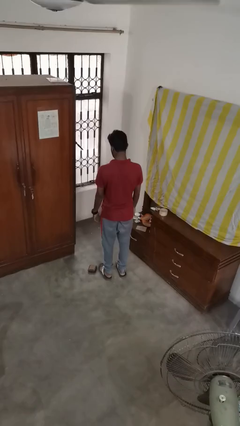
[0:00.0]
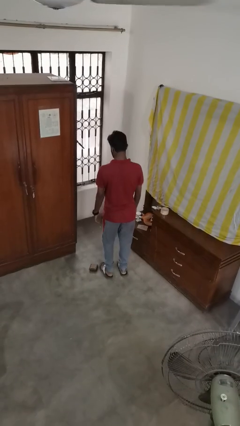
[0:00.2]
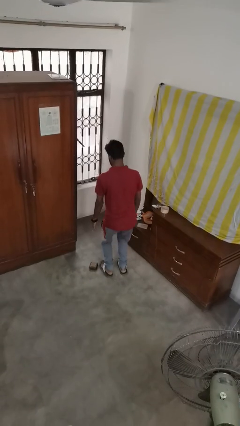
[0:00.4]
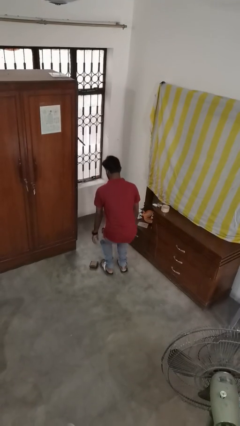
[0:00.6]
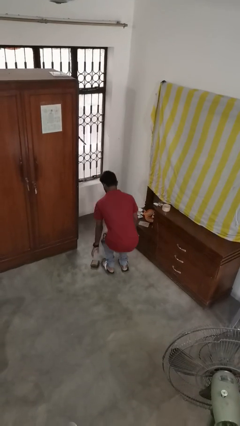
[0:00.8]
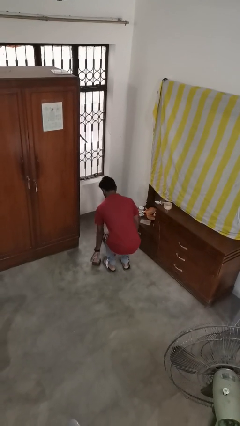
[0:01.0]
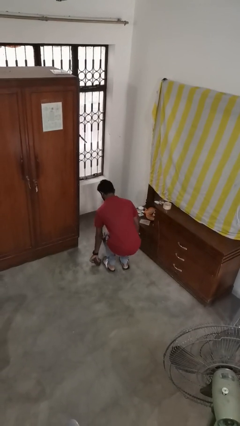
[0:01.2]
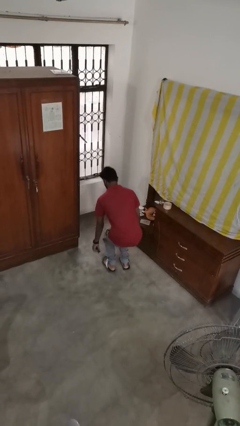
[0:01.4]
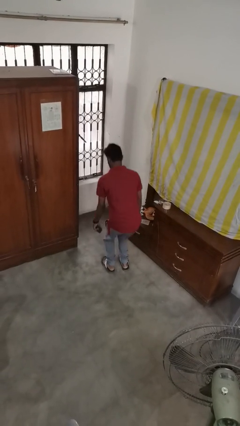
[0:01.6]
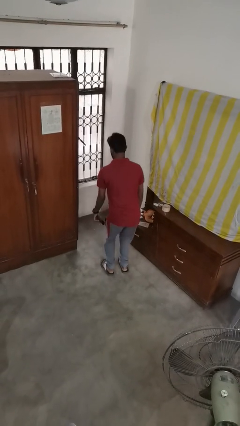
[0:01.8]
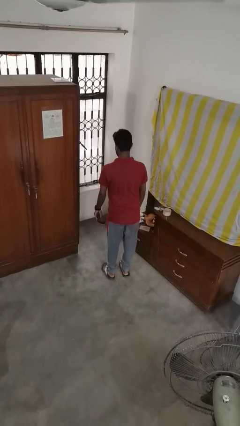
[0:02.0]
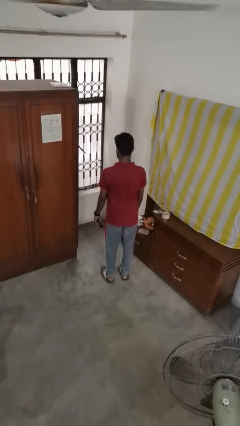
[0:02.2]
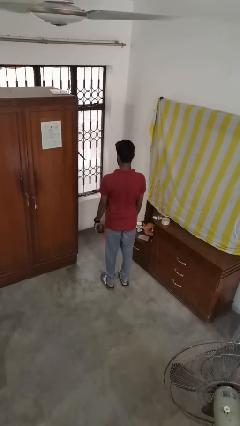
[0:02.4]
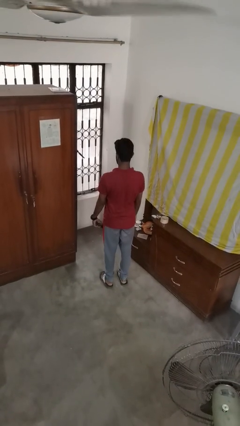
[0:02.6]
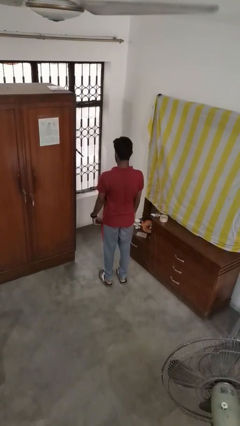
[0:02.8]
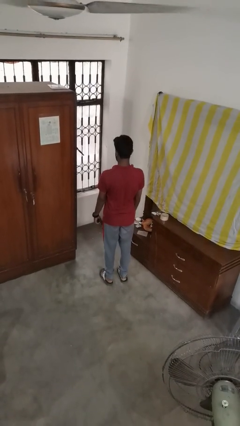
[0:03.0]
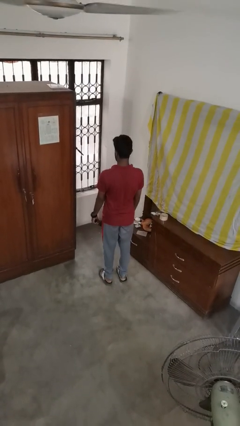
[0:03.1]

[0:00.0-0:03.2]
person picks up object from floor

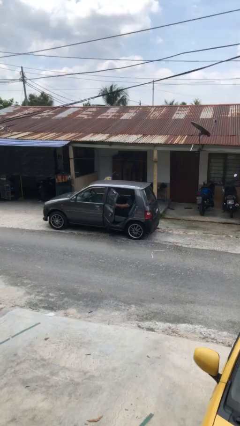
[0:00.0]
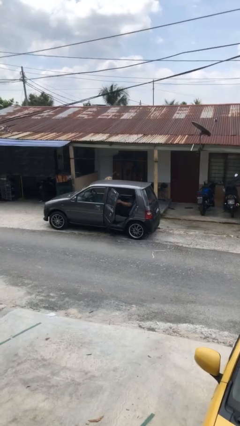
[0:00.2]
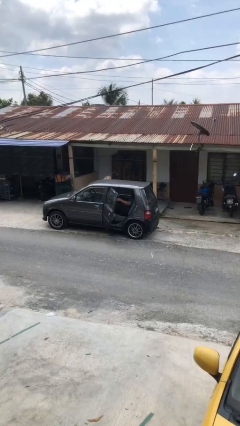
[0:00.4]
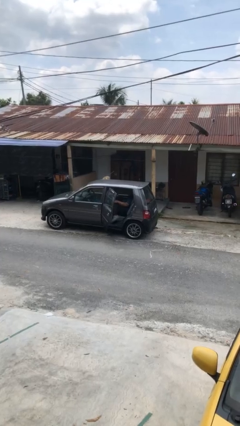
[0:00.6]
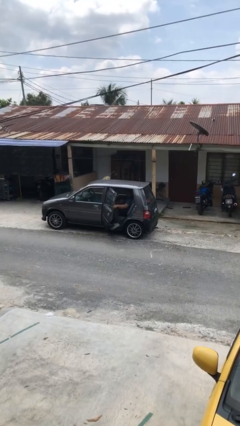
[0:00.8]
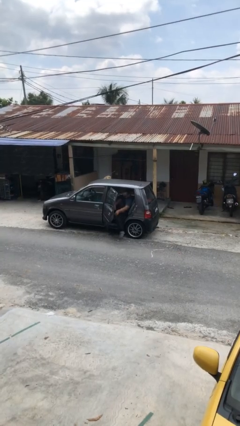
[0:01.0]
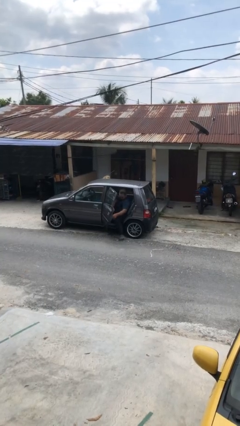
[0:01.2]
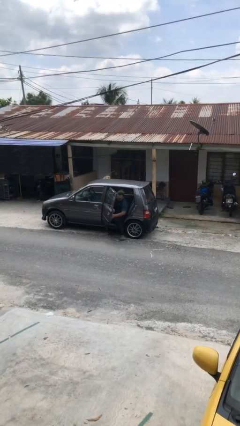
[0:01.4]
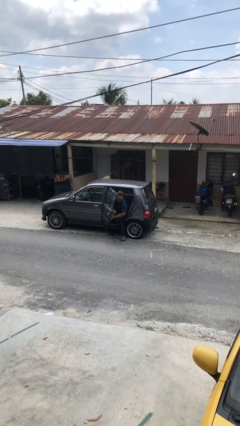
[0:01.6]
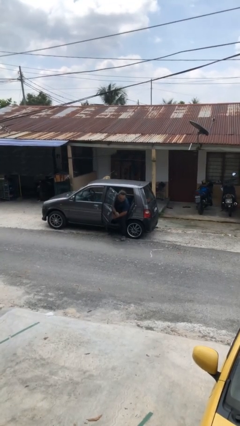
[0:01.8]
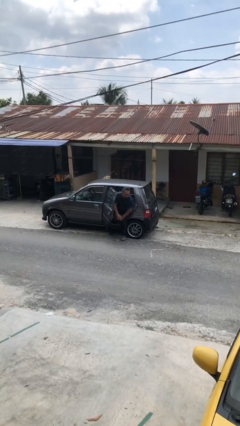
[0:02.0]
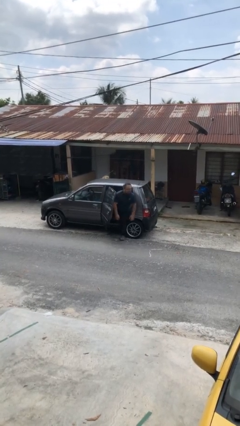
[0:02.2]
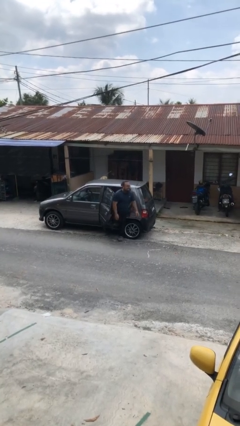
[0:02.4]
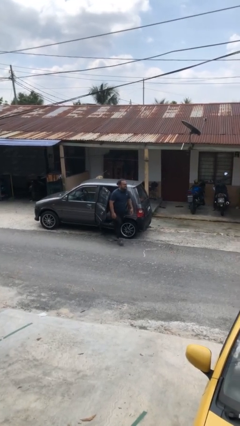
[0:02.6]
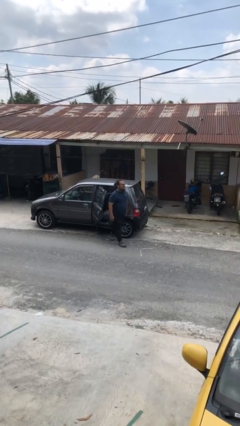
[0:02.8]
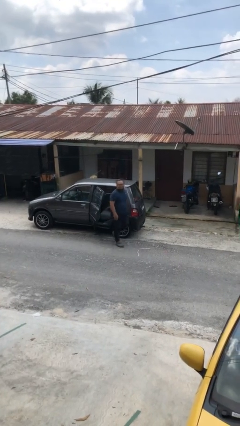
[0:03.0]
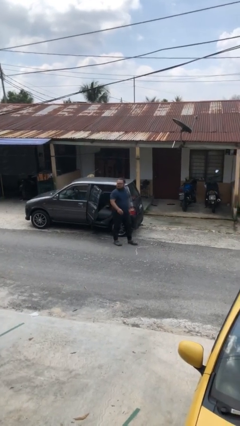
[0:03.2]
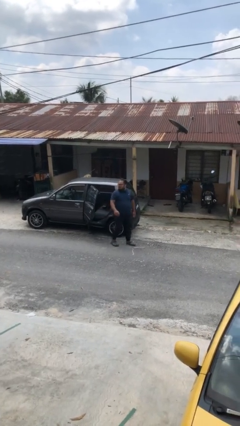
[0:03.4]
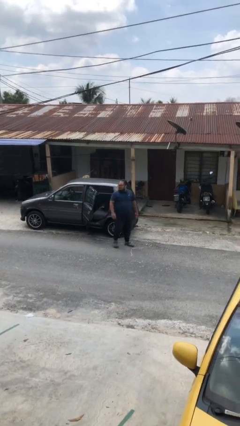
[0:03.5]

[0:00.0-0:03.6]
person exits car

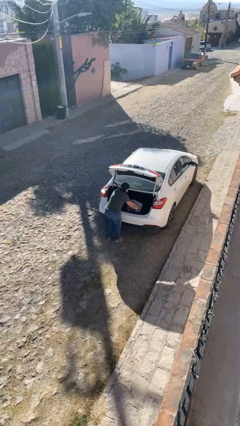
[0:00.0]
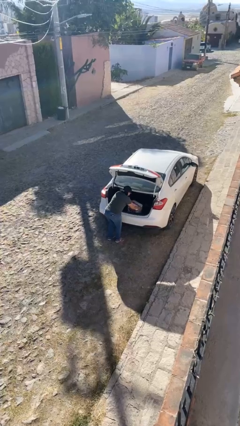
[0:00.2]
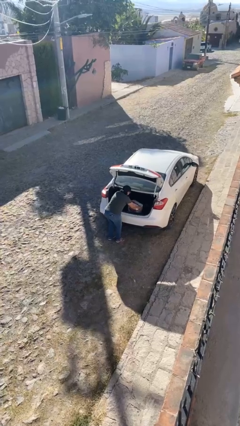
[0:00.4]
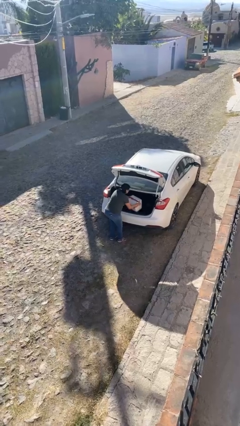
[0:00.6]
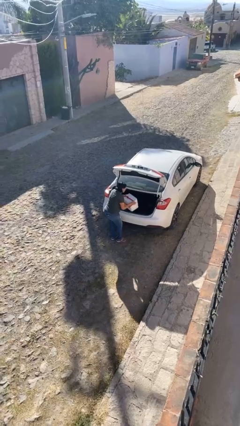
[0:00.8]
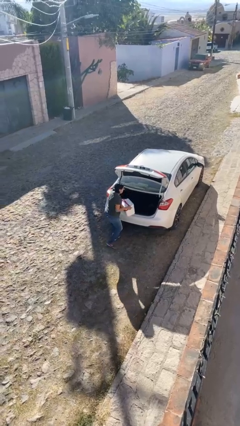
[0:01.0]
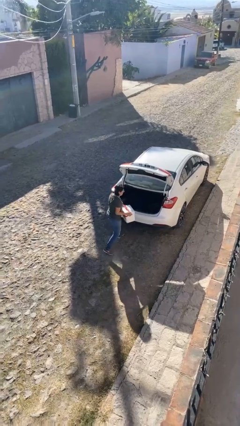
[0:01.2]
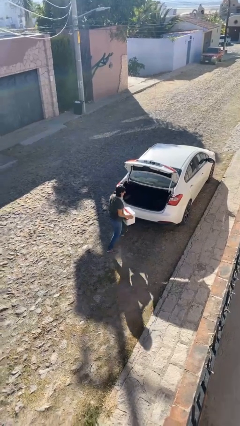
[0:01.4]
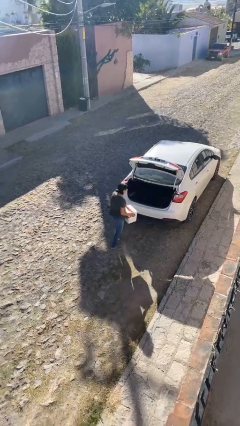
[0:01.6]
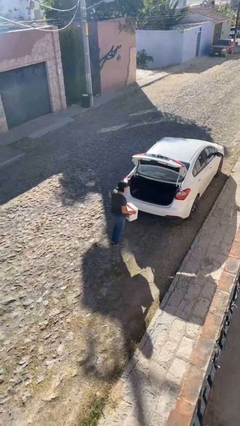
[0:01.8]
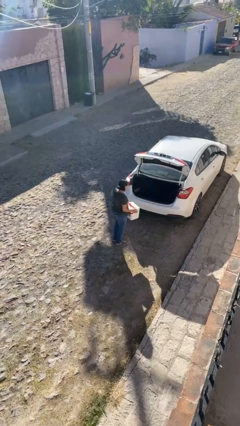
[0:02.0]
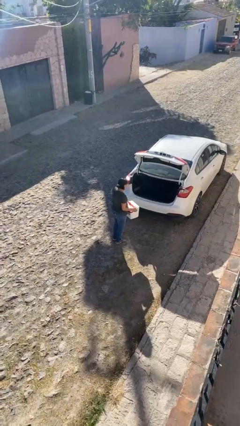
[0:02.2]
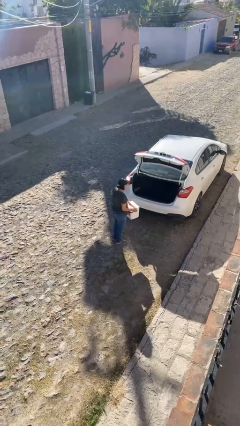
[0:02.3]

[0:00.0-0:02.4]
person unloads car

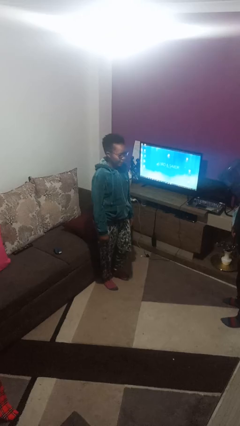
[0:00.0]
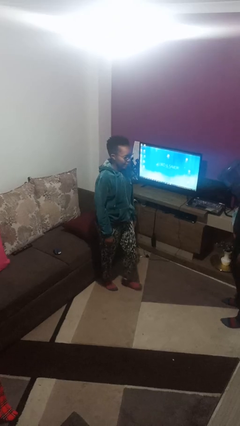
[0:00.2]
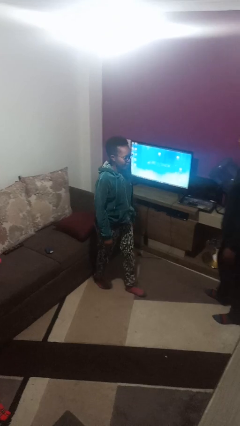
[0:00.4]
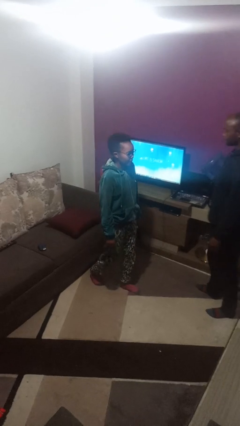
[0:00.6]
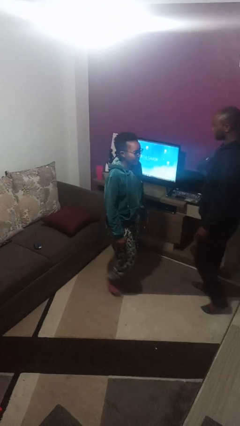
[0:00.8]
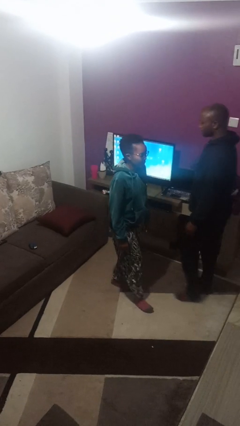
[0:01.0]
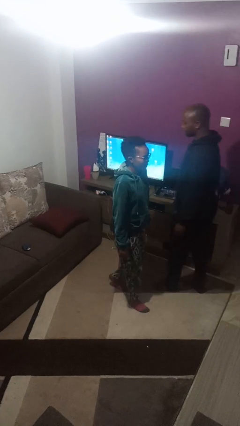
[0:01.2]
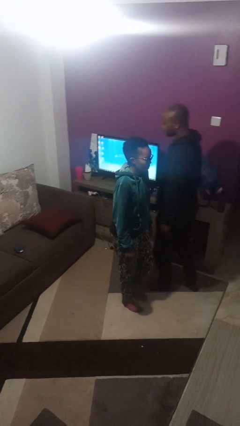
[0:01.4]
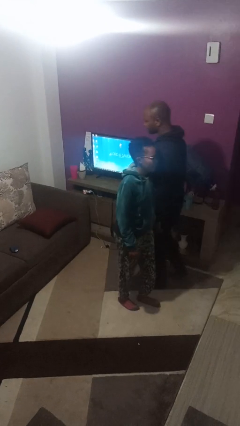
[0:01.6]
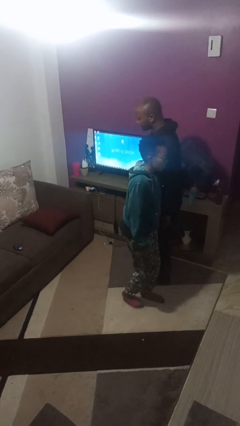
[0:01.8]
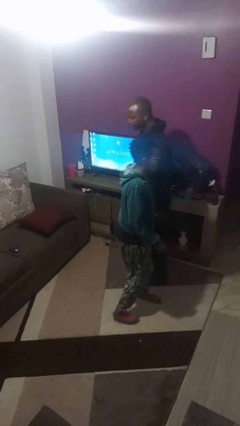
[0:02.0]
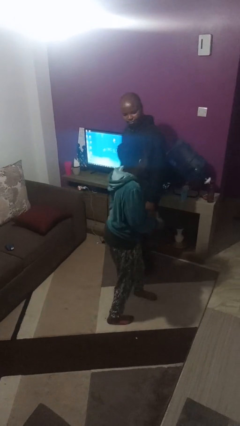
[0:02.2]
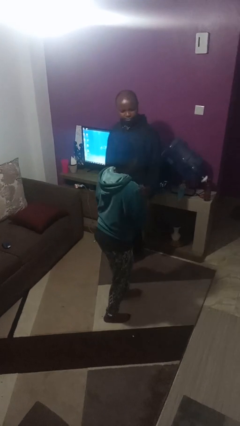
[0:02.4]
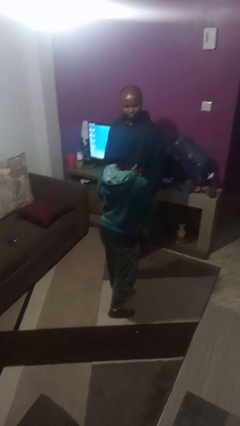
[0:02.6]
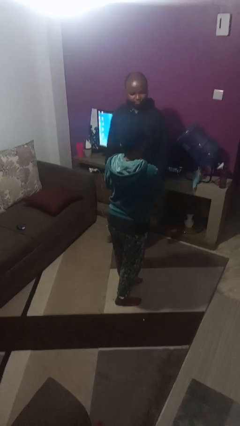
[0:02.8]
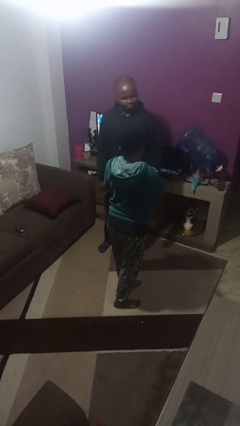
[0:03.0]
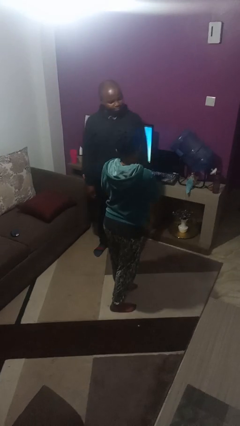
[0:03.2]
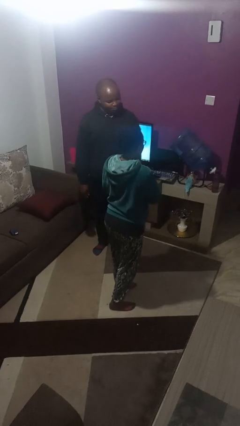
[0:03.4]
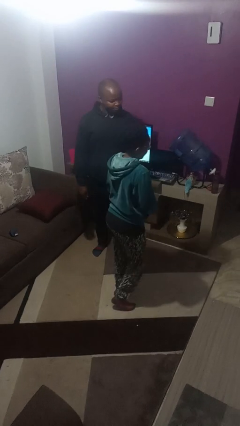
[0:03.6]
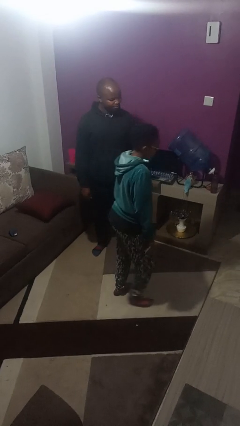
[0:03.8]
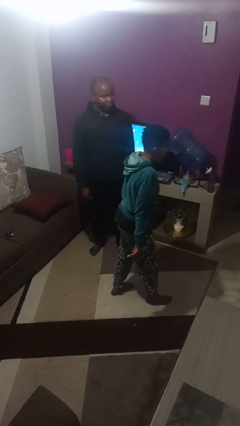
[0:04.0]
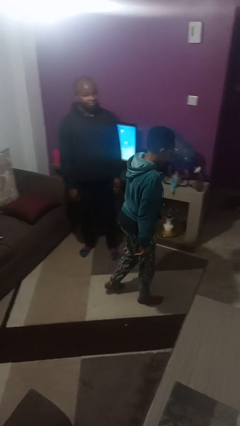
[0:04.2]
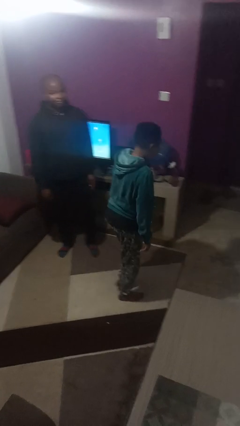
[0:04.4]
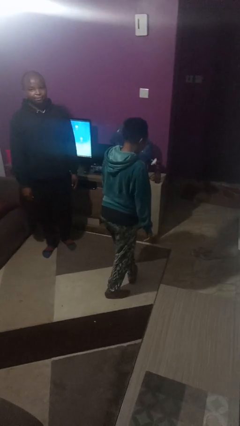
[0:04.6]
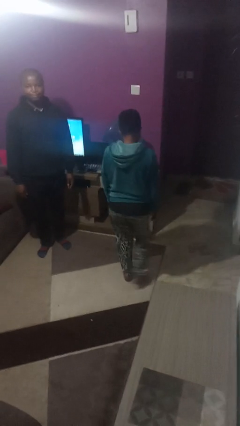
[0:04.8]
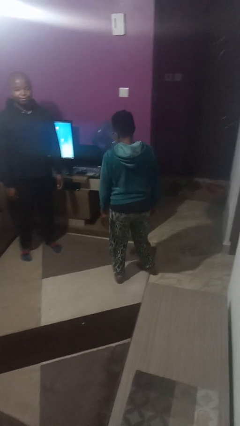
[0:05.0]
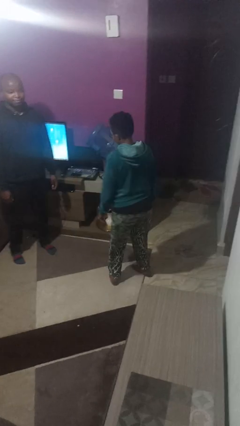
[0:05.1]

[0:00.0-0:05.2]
person bumps into person

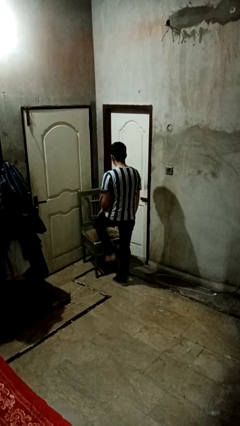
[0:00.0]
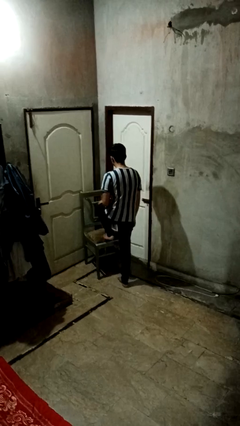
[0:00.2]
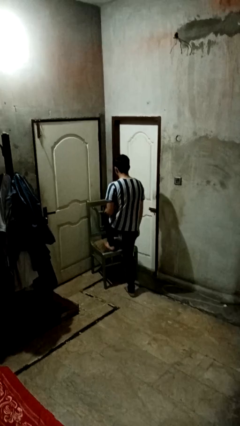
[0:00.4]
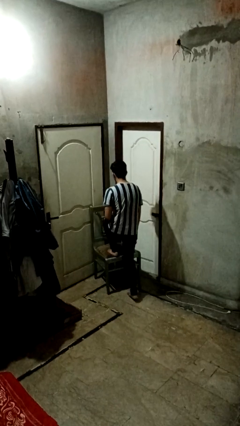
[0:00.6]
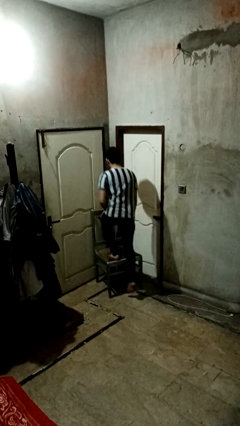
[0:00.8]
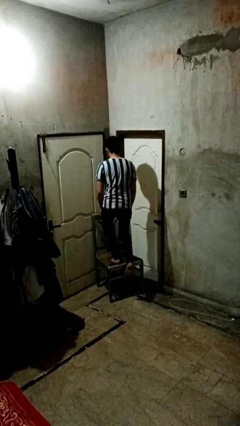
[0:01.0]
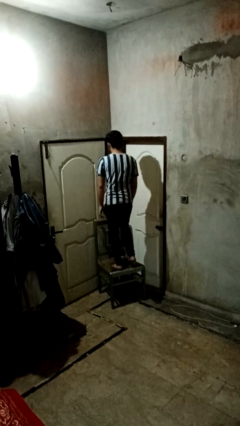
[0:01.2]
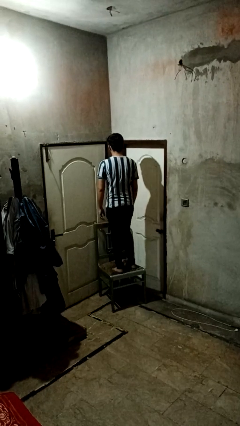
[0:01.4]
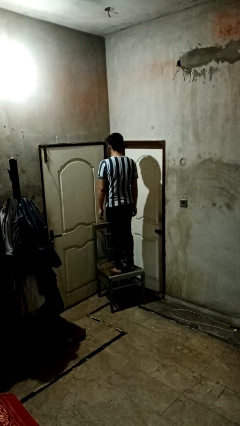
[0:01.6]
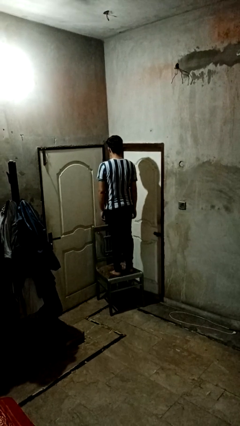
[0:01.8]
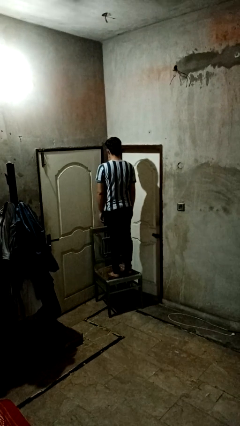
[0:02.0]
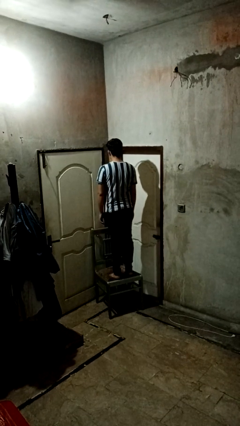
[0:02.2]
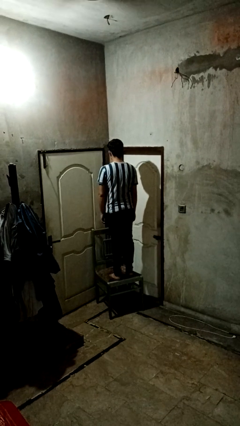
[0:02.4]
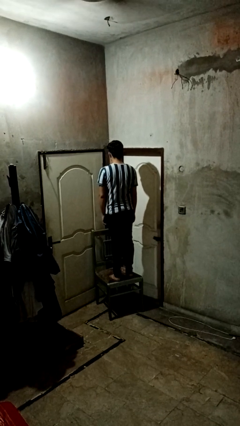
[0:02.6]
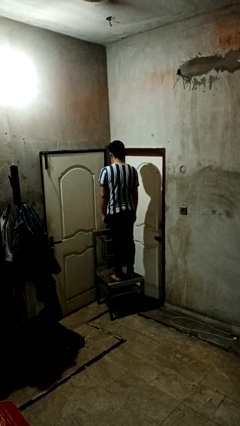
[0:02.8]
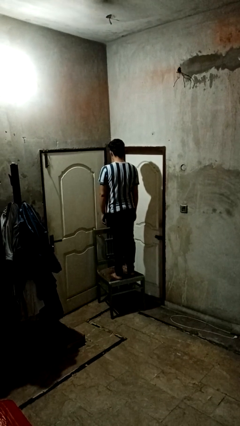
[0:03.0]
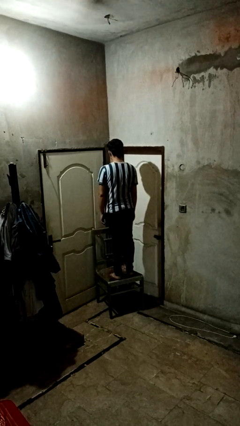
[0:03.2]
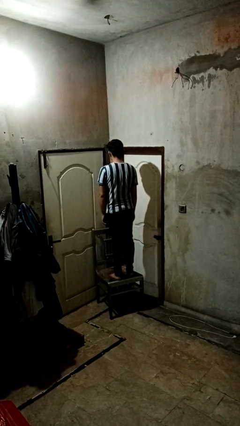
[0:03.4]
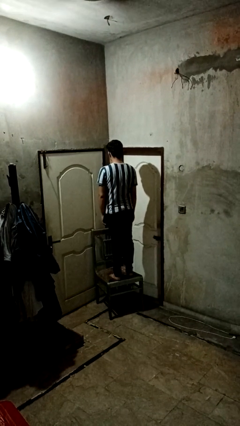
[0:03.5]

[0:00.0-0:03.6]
person climbs on chair
